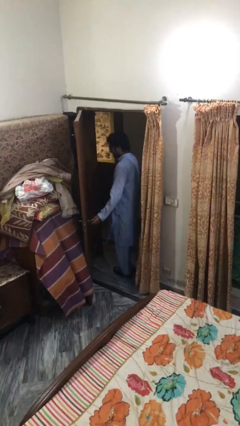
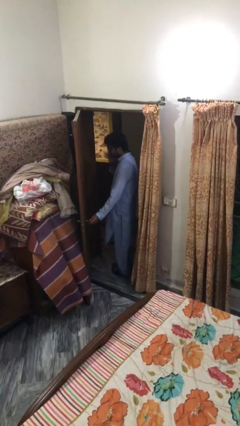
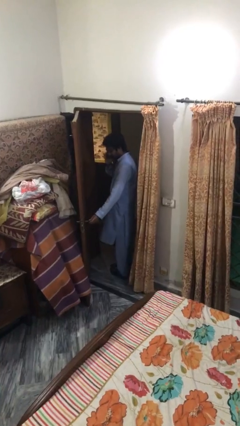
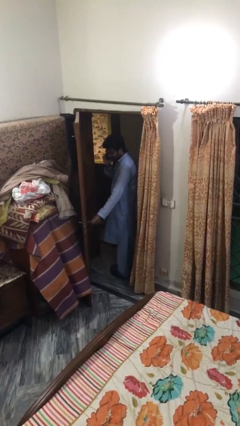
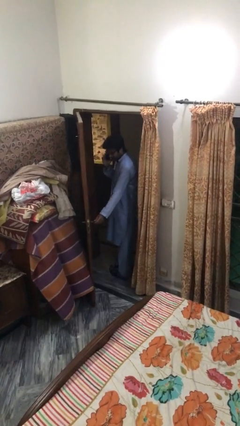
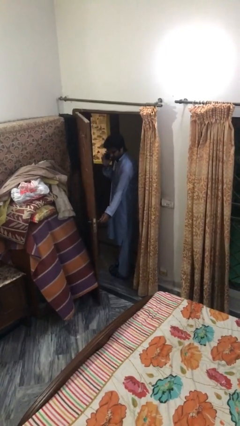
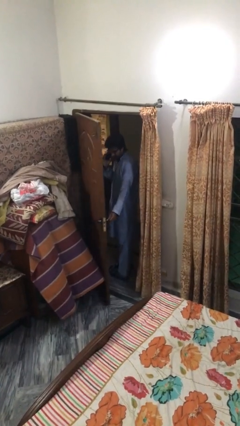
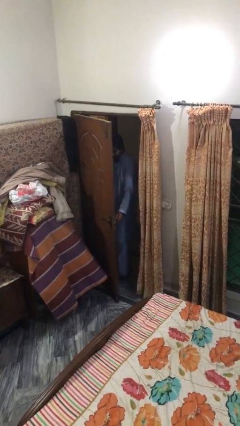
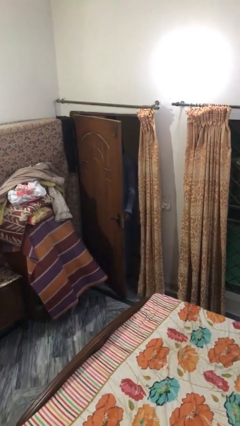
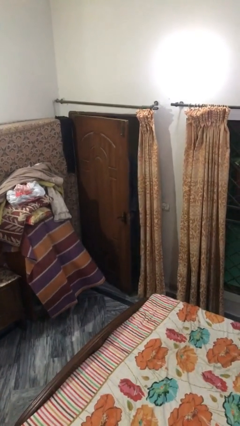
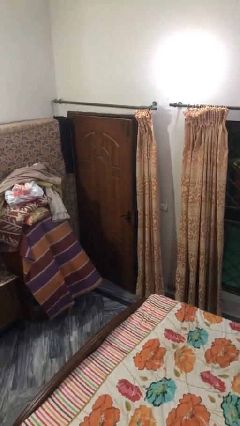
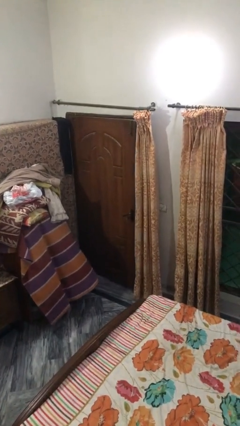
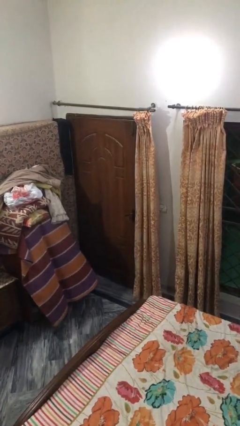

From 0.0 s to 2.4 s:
person closes facility door

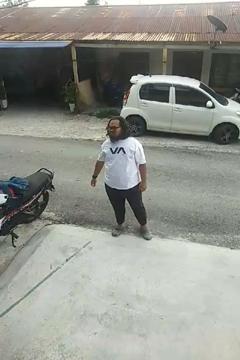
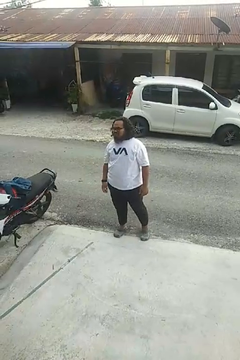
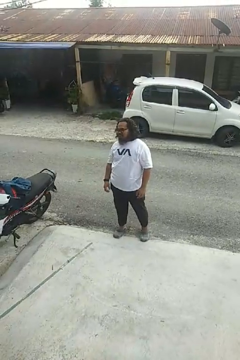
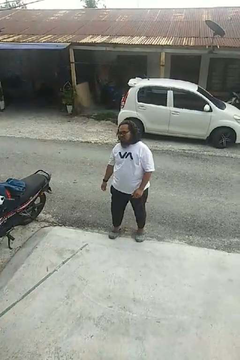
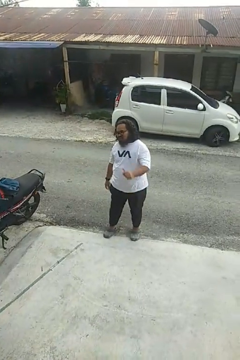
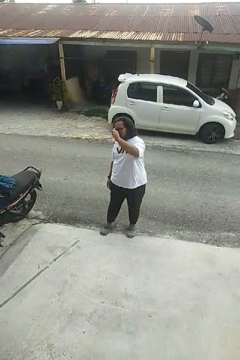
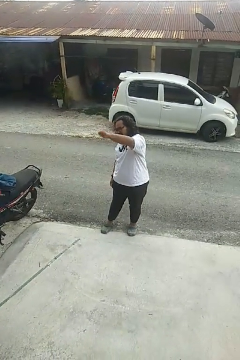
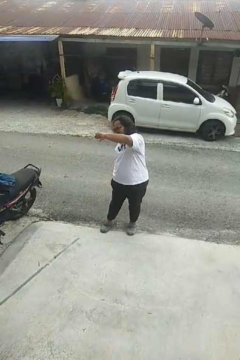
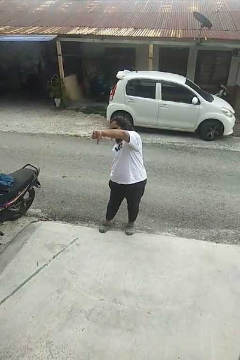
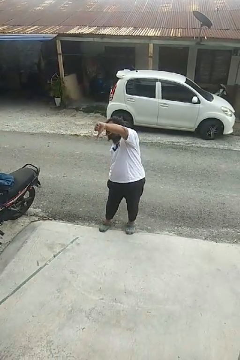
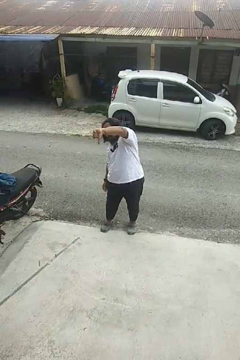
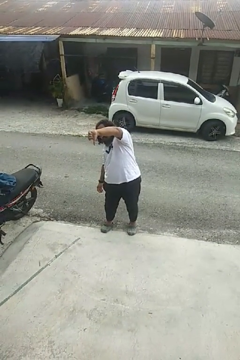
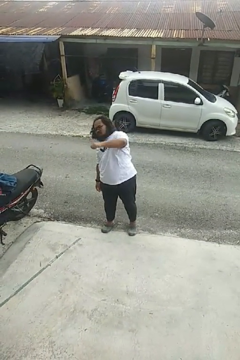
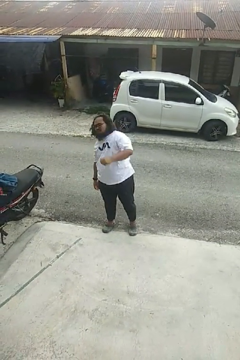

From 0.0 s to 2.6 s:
person gestures thumbs down

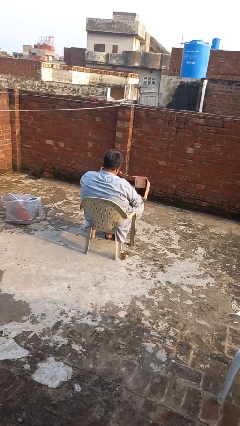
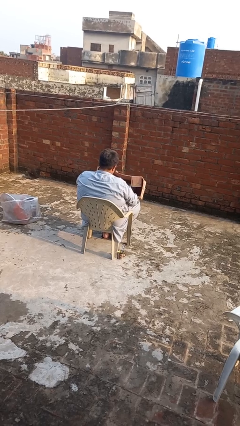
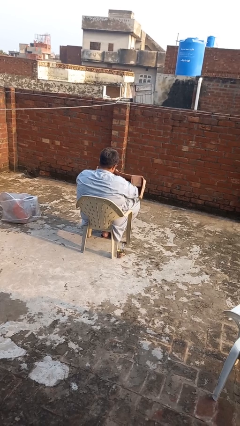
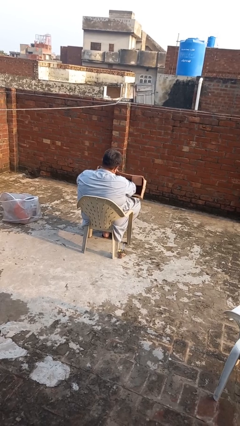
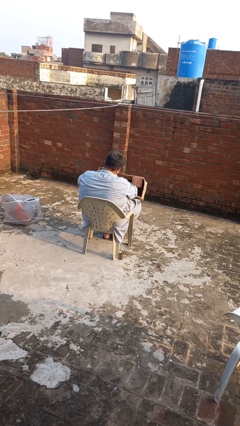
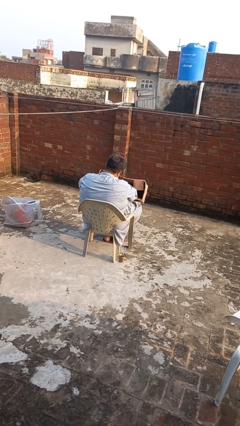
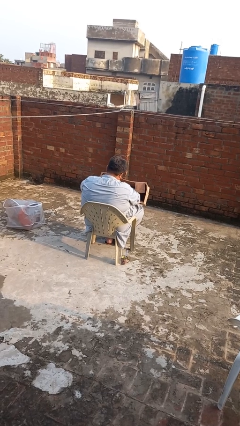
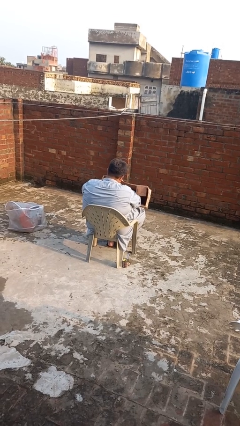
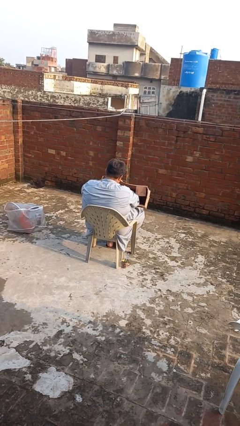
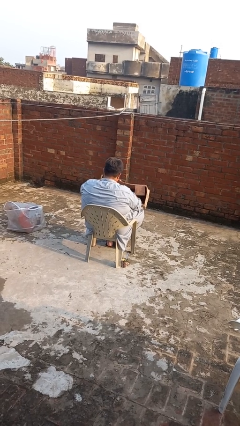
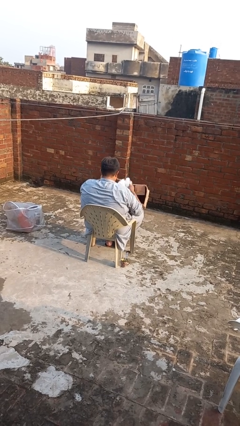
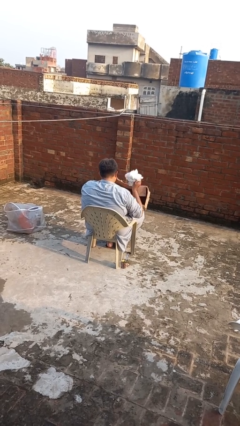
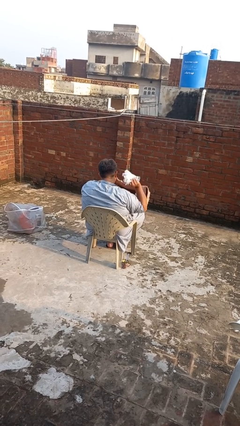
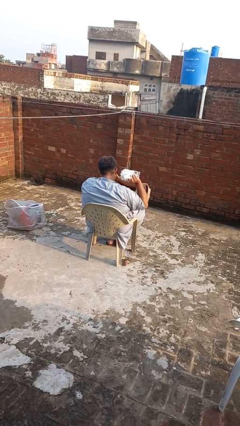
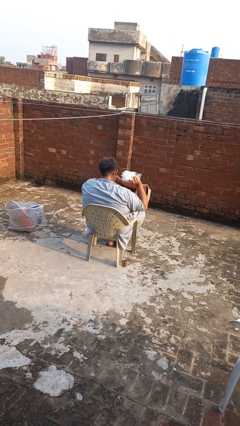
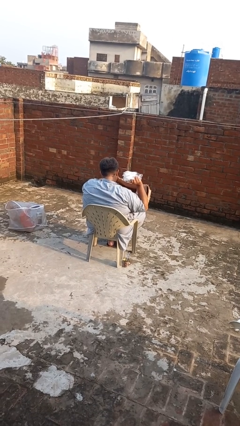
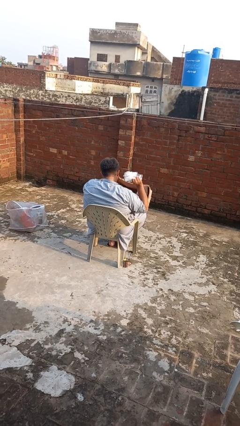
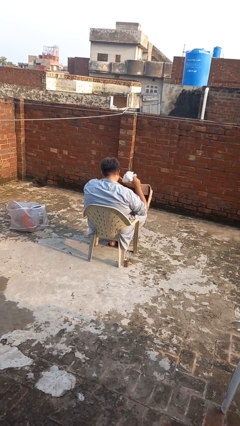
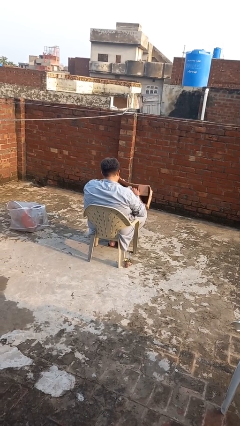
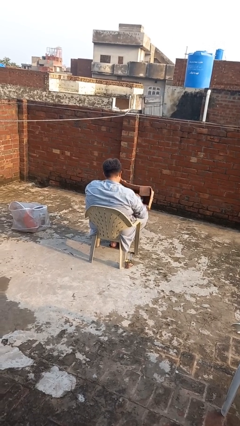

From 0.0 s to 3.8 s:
person searches in box

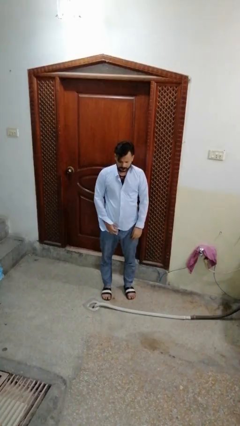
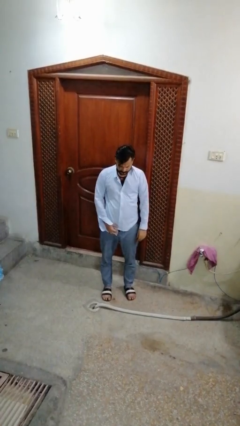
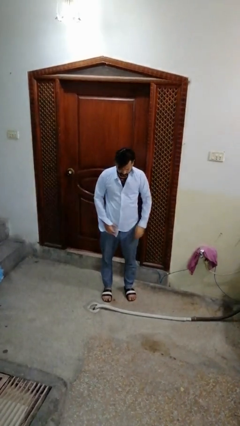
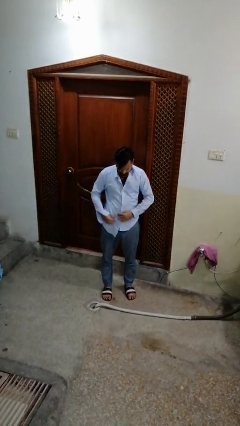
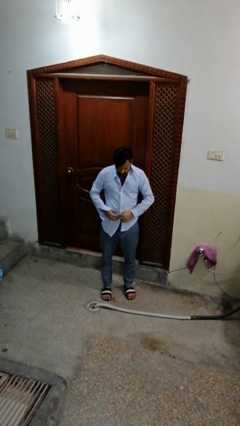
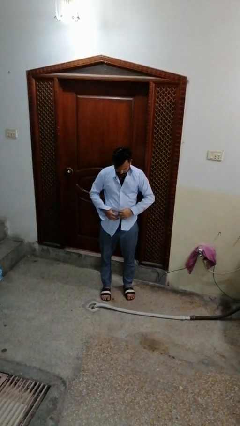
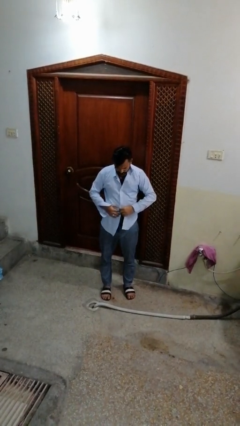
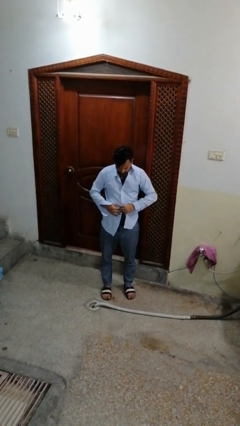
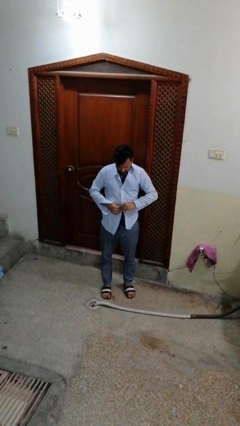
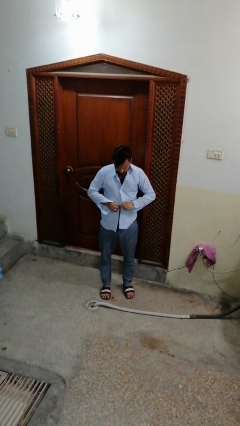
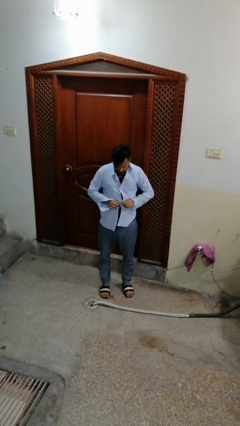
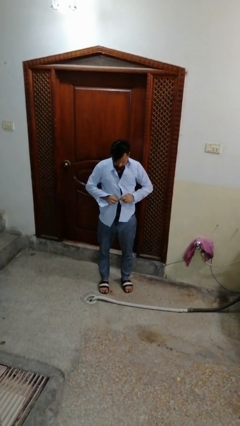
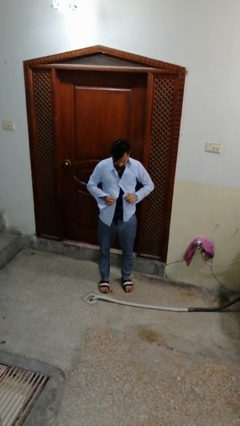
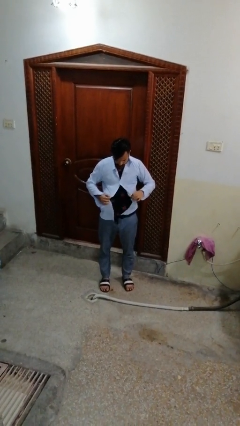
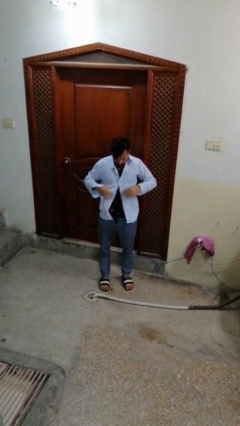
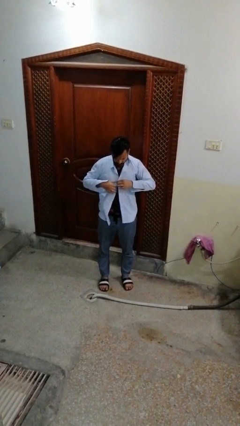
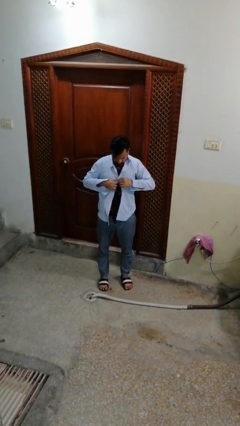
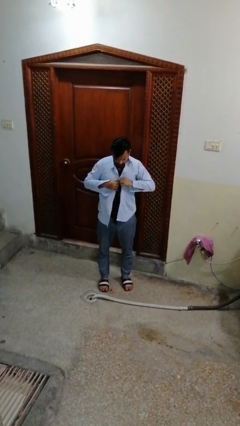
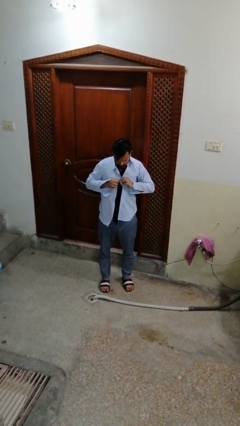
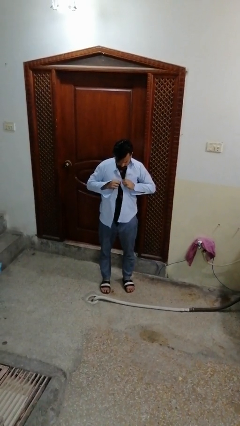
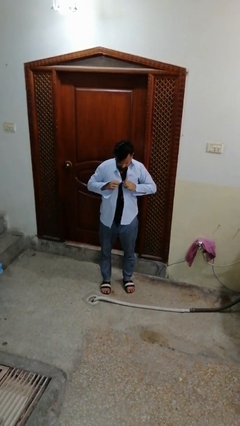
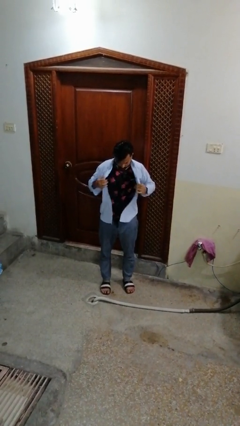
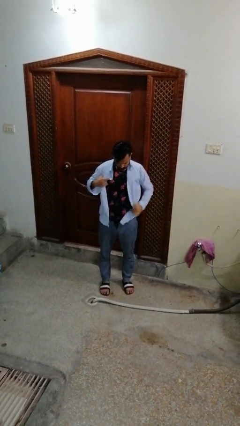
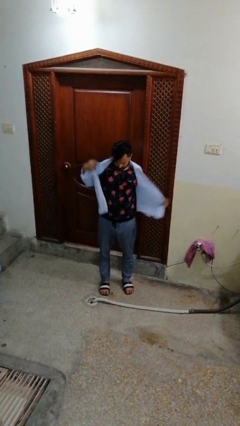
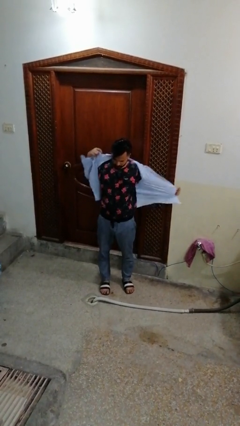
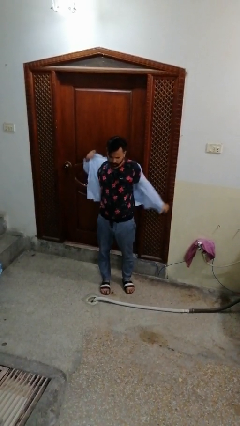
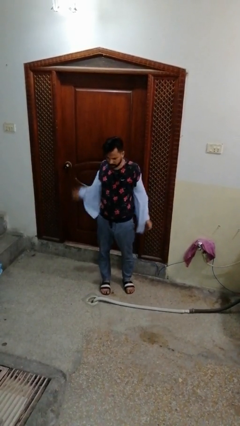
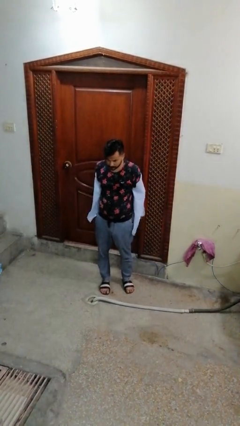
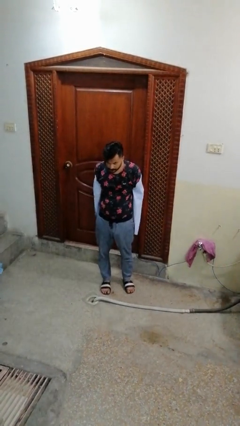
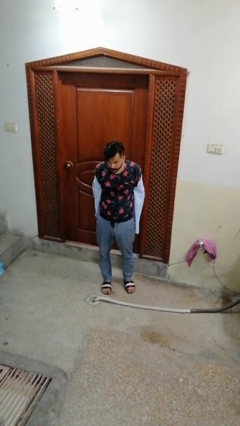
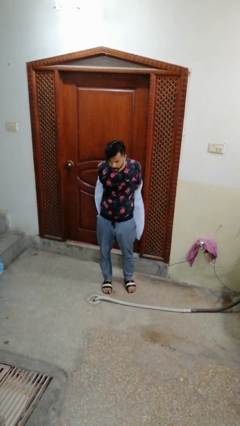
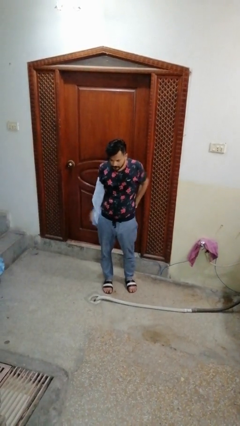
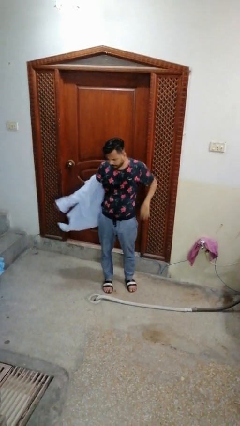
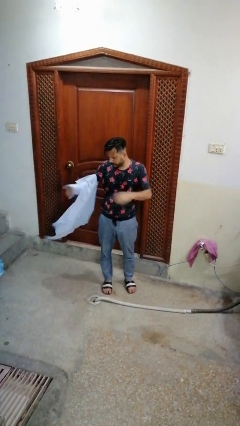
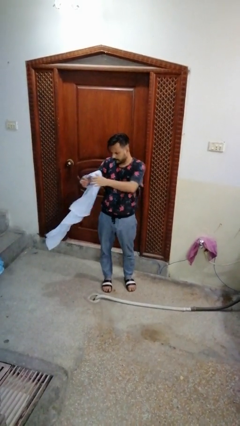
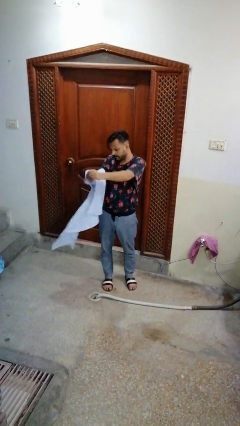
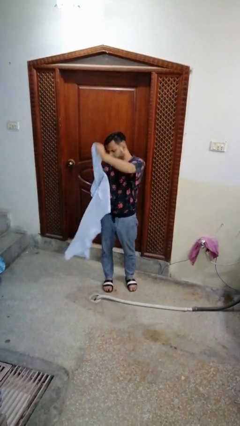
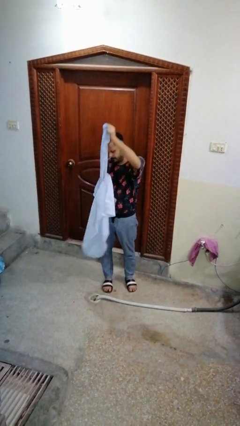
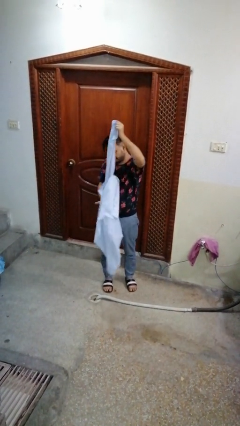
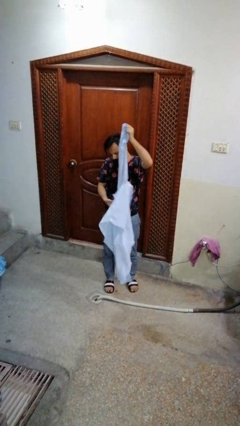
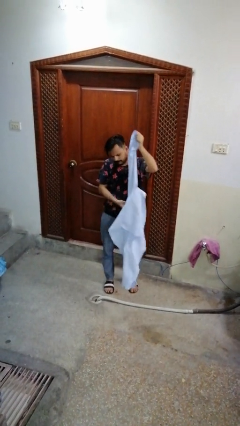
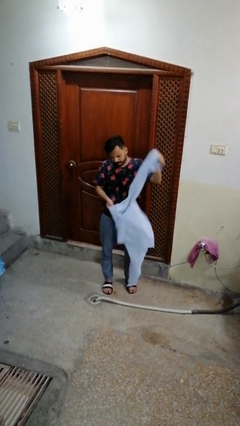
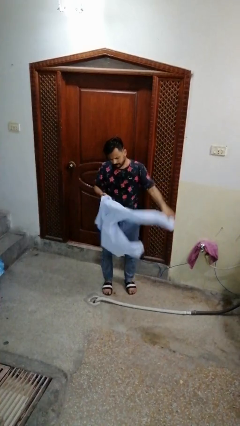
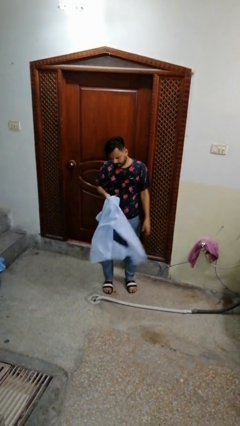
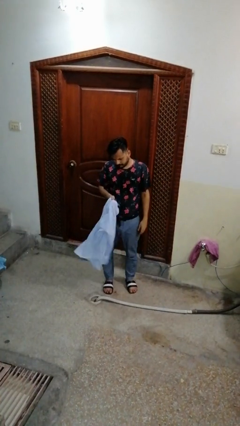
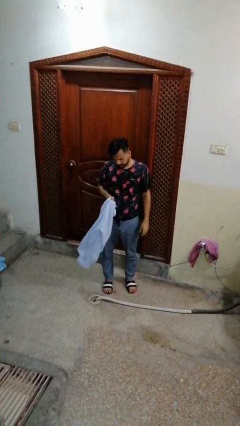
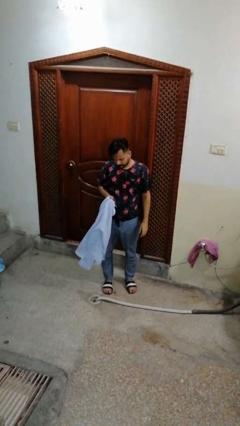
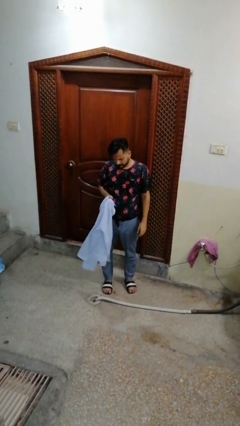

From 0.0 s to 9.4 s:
person takes off shirt
